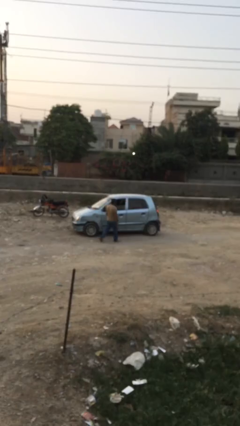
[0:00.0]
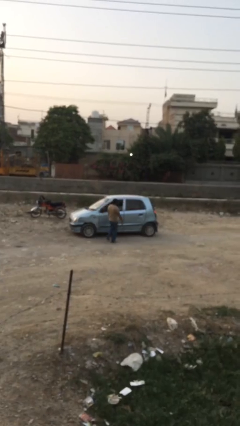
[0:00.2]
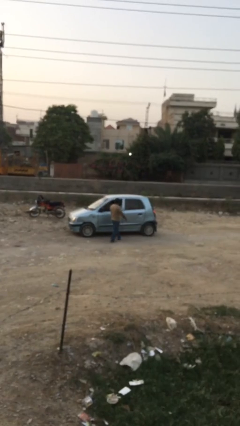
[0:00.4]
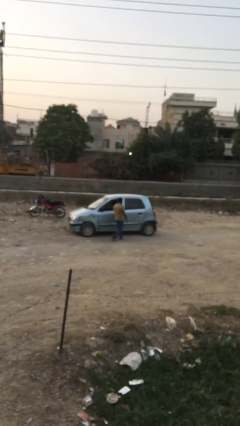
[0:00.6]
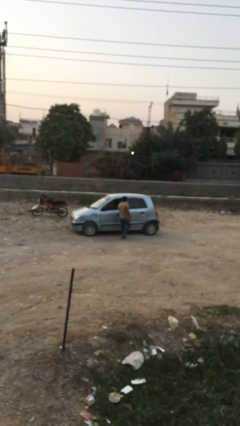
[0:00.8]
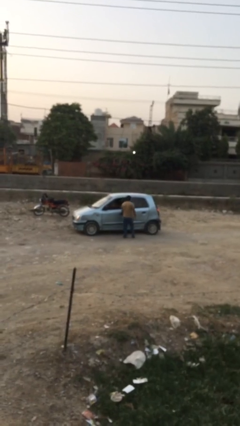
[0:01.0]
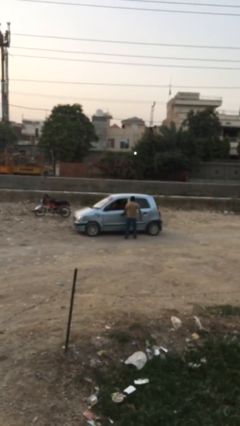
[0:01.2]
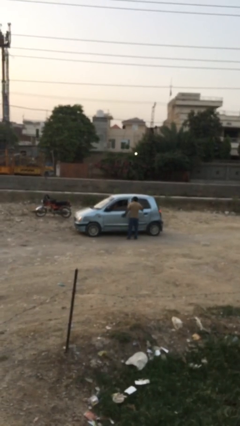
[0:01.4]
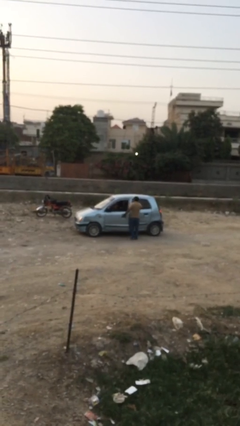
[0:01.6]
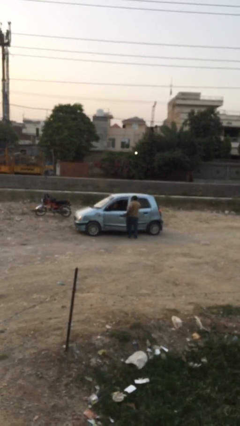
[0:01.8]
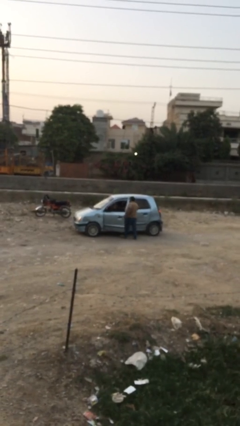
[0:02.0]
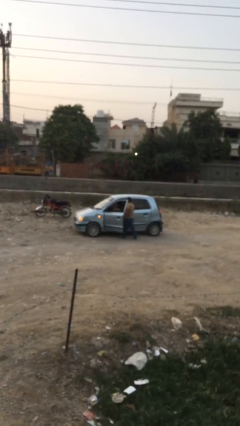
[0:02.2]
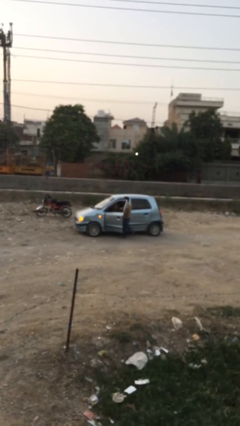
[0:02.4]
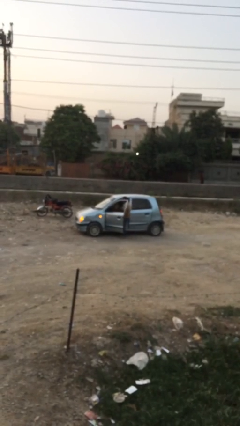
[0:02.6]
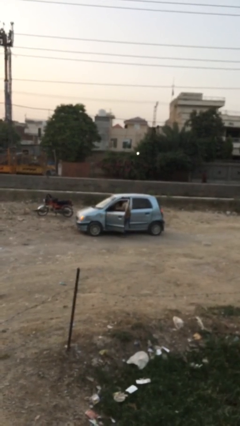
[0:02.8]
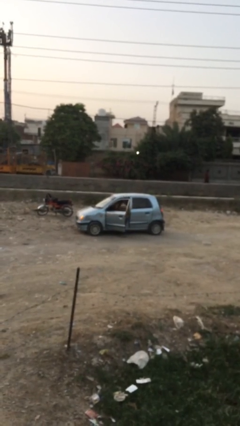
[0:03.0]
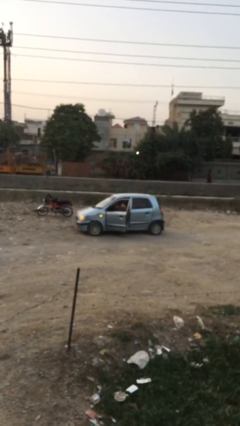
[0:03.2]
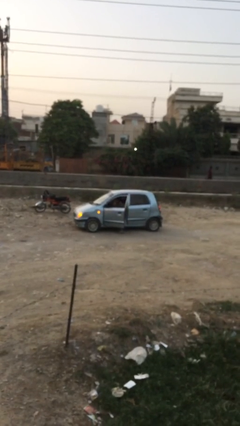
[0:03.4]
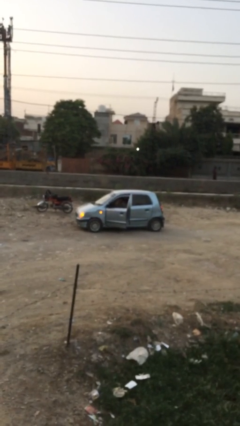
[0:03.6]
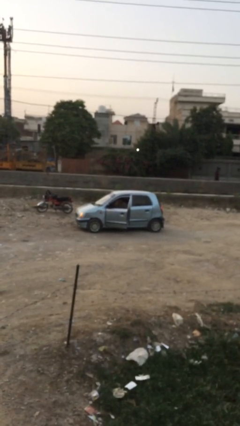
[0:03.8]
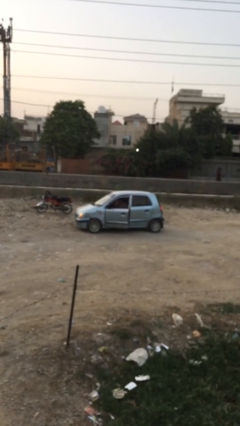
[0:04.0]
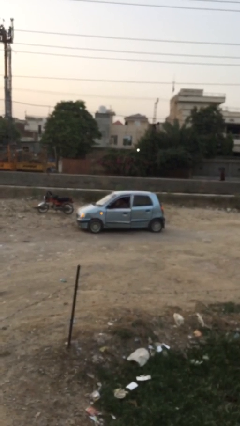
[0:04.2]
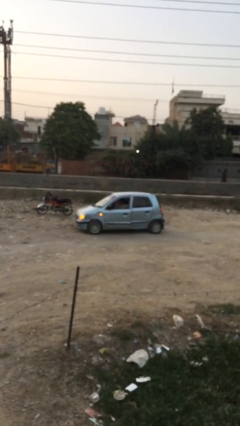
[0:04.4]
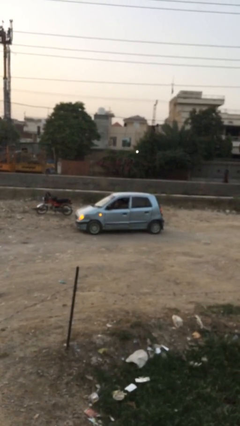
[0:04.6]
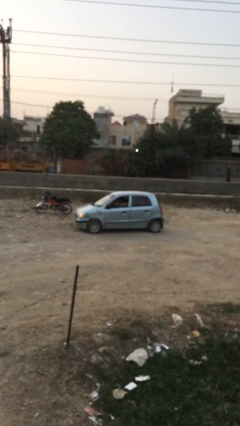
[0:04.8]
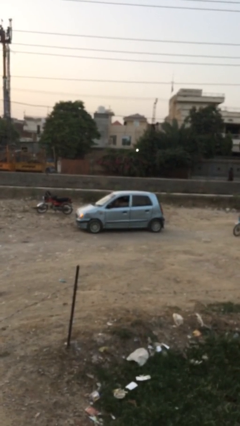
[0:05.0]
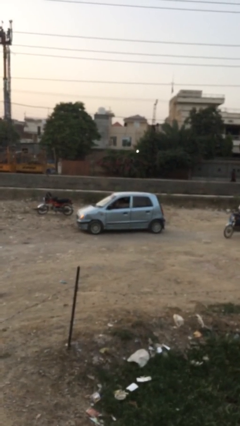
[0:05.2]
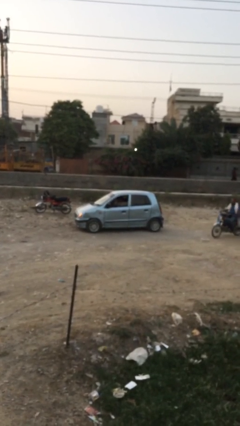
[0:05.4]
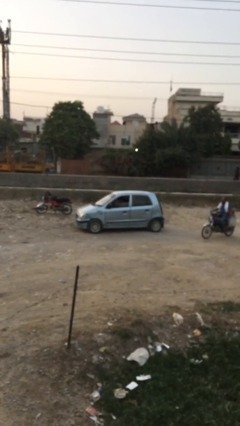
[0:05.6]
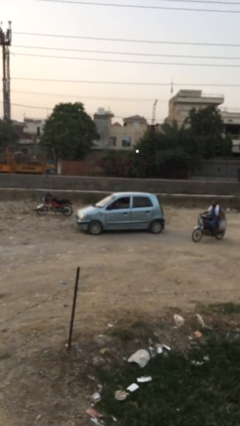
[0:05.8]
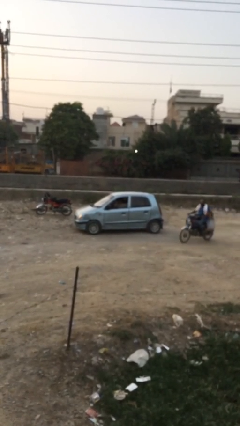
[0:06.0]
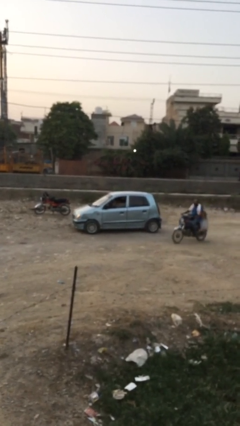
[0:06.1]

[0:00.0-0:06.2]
car picks up person

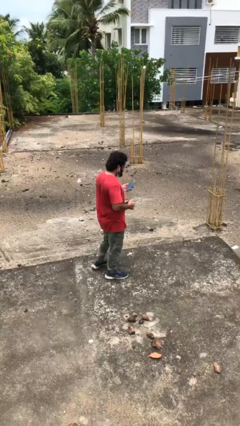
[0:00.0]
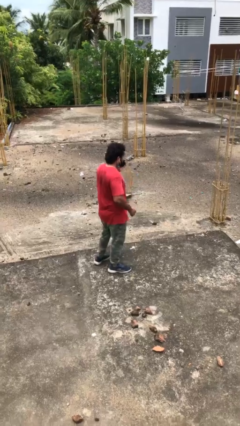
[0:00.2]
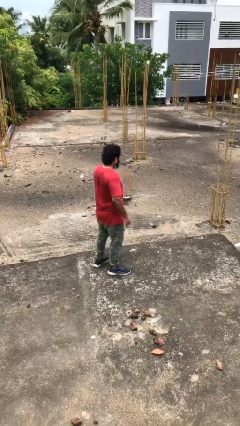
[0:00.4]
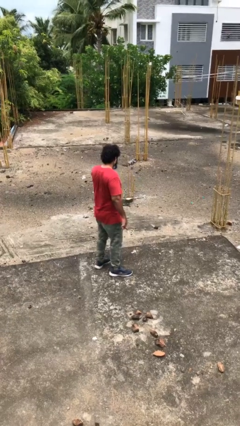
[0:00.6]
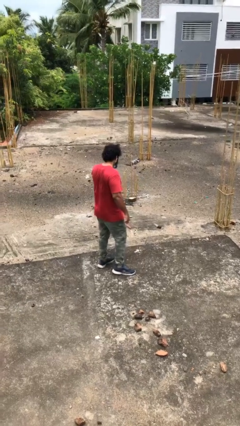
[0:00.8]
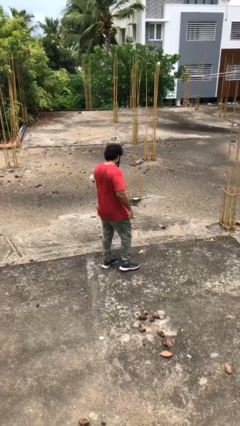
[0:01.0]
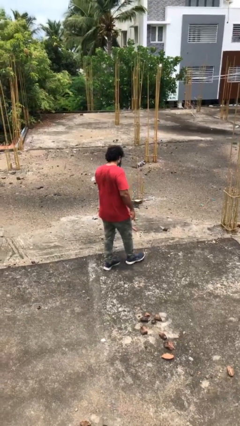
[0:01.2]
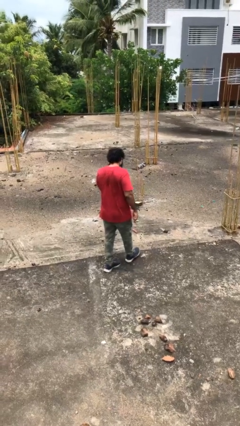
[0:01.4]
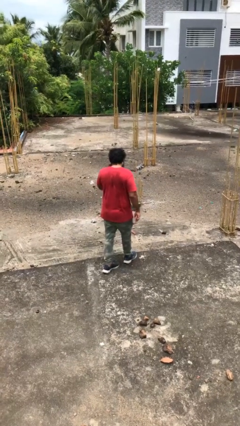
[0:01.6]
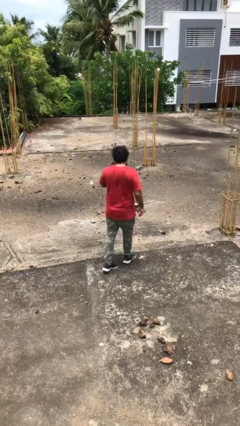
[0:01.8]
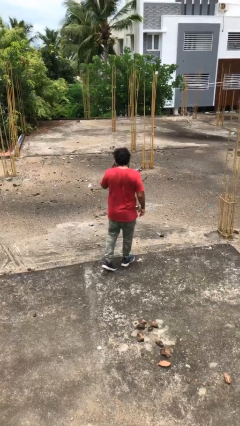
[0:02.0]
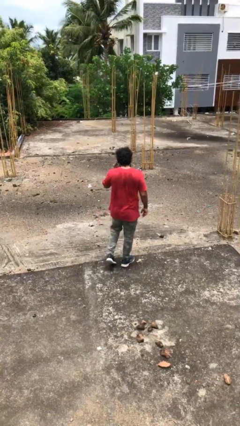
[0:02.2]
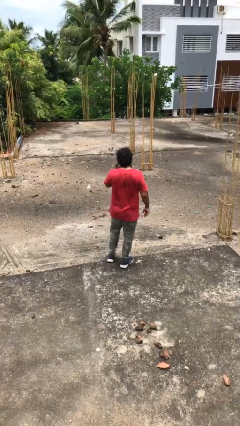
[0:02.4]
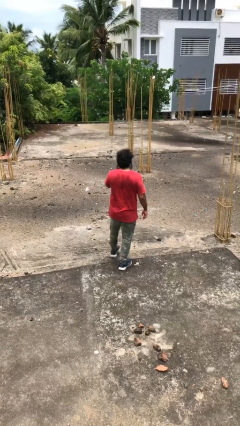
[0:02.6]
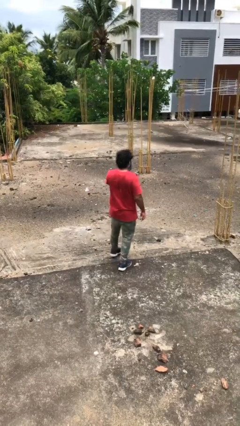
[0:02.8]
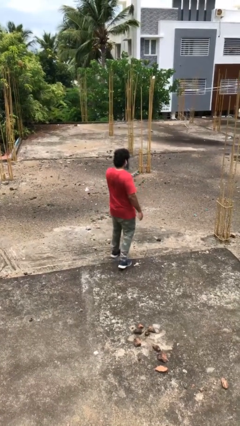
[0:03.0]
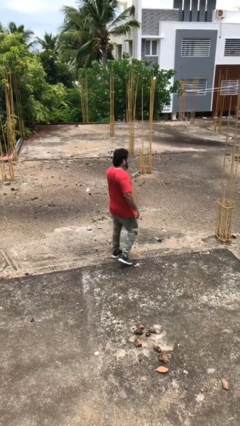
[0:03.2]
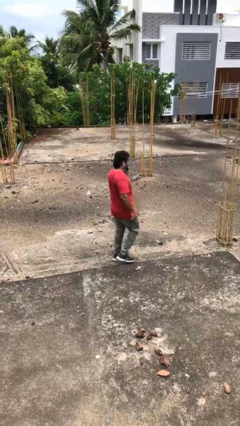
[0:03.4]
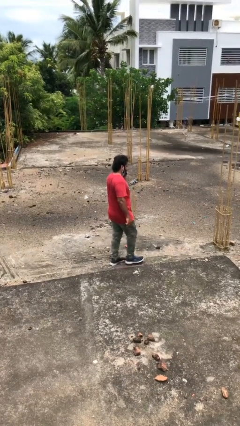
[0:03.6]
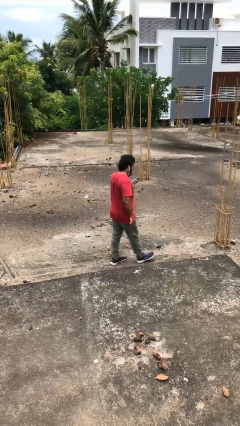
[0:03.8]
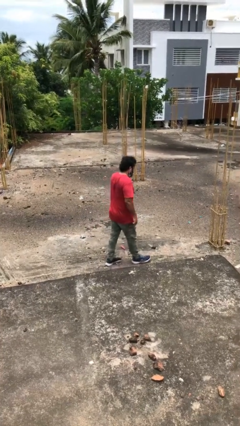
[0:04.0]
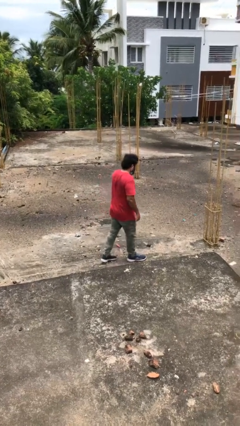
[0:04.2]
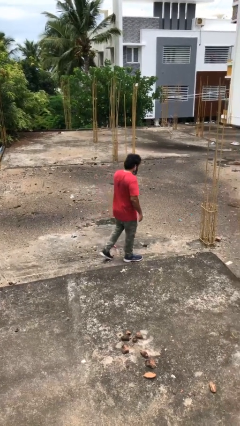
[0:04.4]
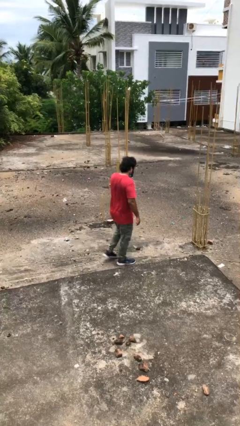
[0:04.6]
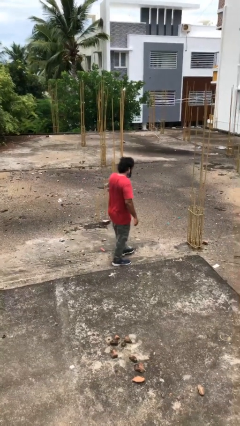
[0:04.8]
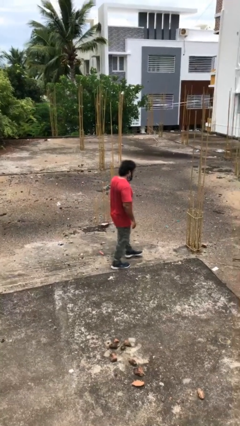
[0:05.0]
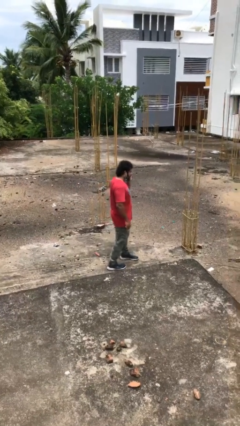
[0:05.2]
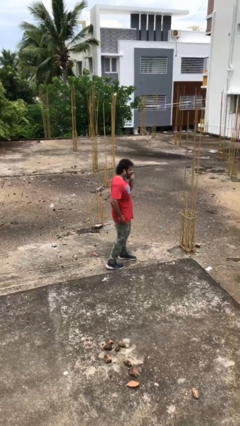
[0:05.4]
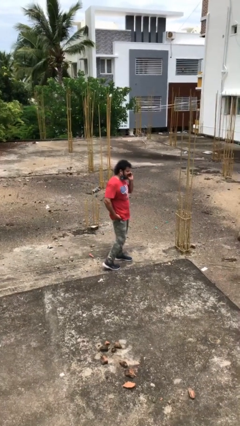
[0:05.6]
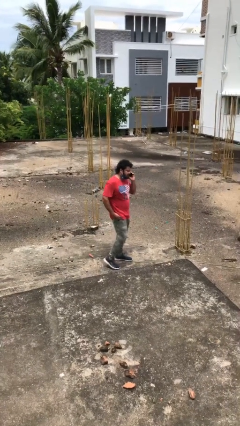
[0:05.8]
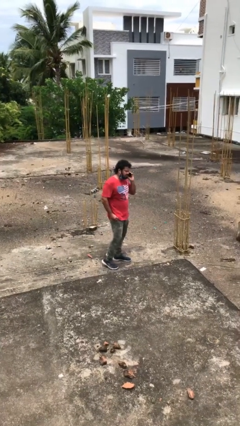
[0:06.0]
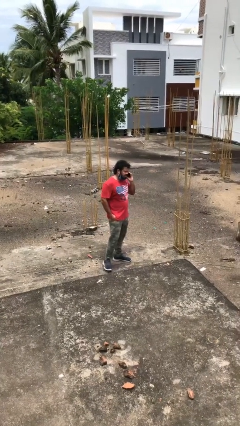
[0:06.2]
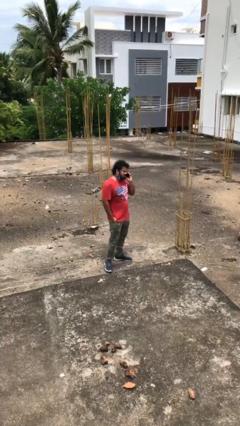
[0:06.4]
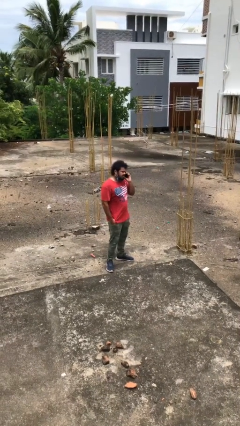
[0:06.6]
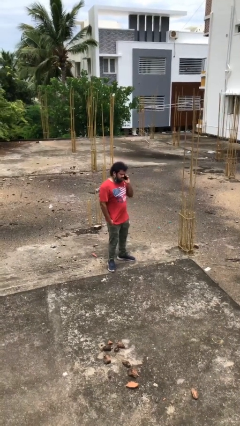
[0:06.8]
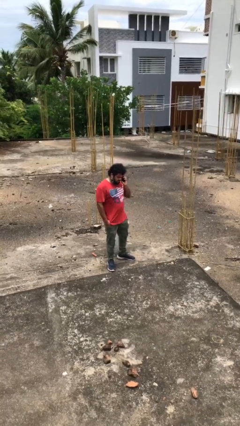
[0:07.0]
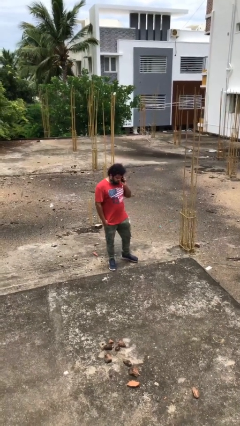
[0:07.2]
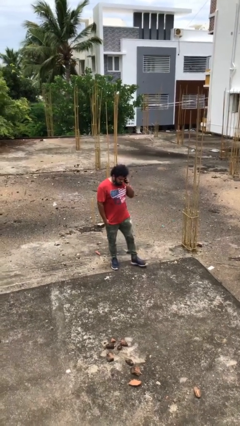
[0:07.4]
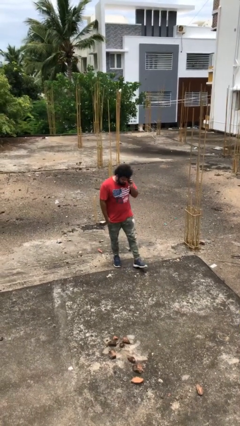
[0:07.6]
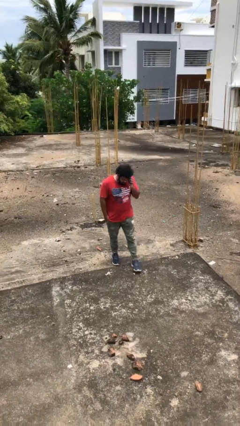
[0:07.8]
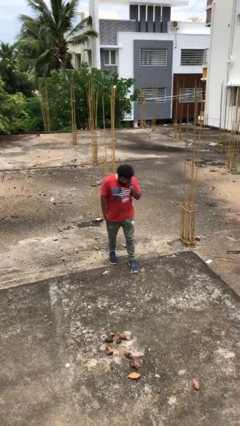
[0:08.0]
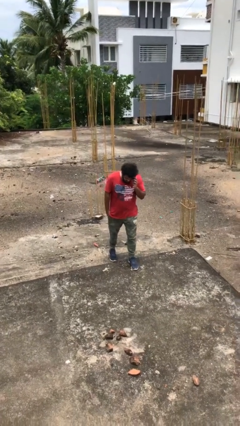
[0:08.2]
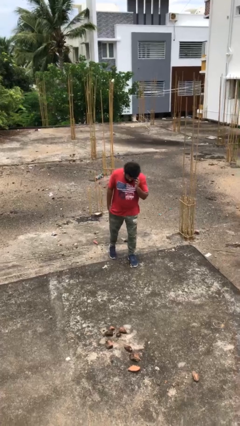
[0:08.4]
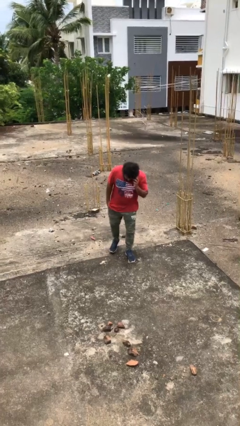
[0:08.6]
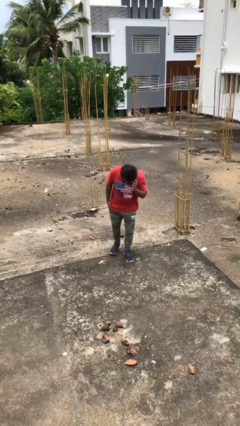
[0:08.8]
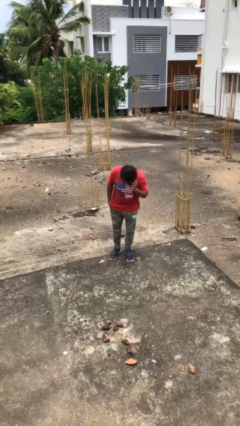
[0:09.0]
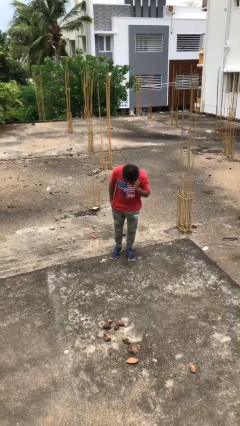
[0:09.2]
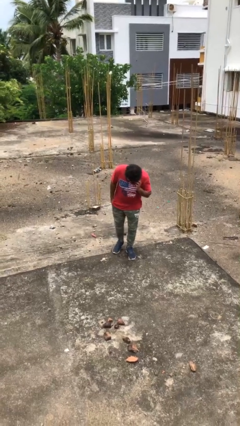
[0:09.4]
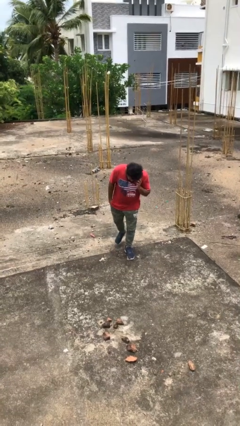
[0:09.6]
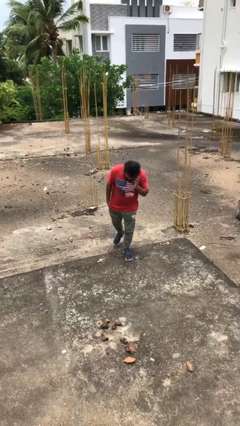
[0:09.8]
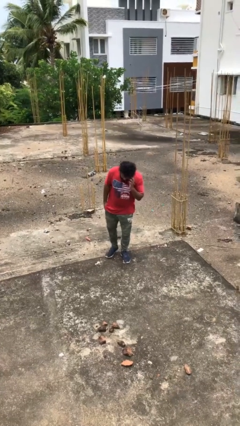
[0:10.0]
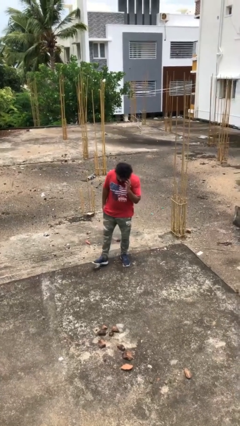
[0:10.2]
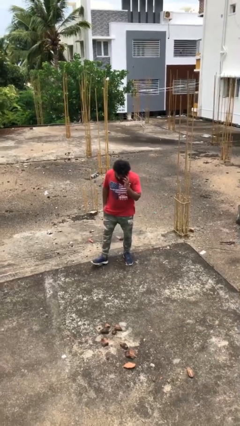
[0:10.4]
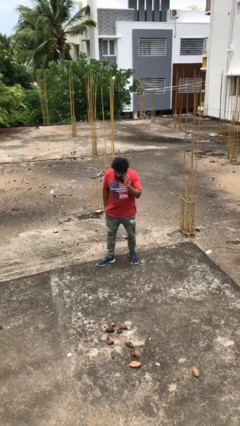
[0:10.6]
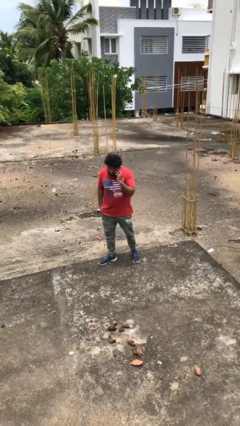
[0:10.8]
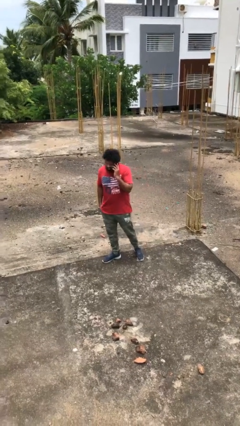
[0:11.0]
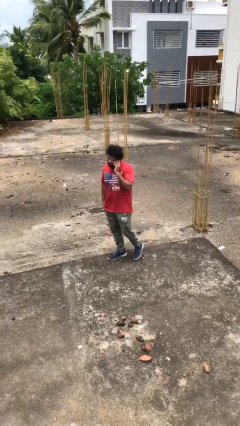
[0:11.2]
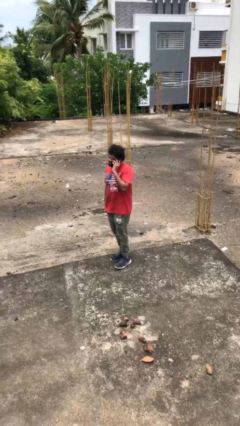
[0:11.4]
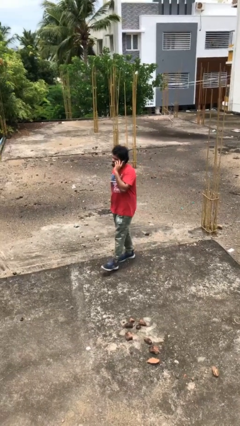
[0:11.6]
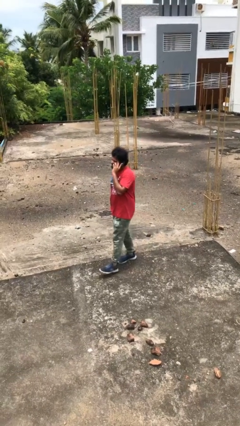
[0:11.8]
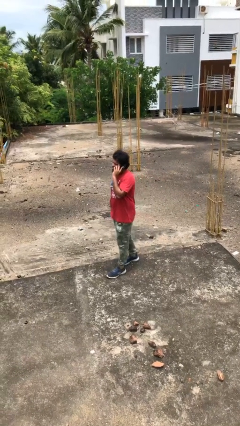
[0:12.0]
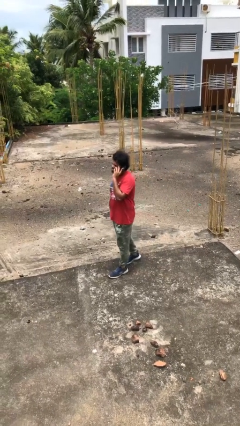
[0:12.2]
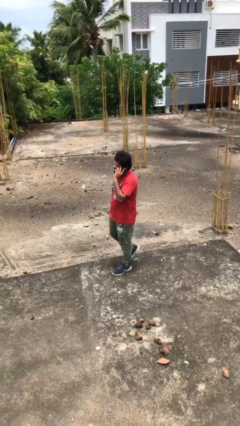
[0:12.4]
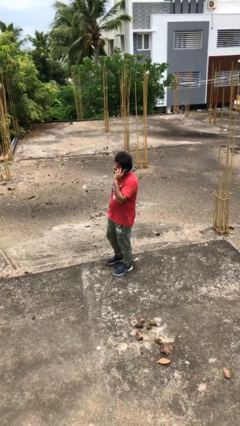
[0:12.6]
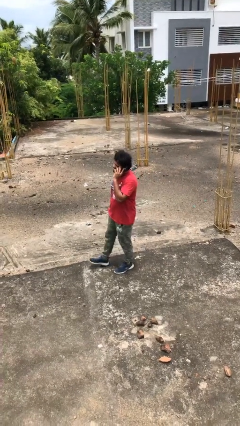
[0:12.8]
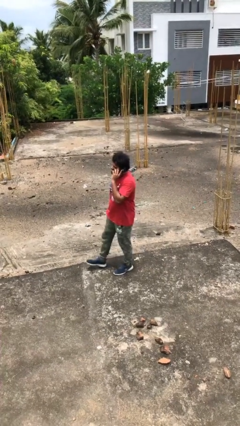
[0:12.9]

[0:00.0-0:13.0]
person talks on phone
